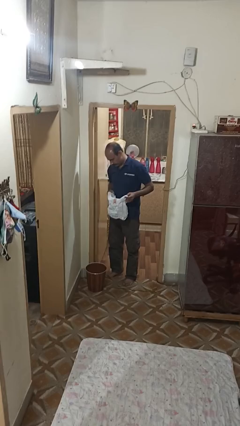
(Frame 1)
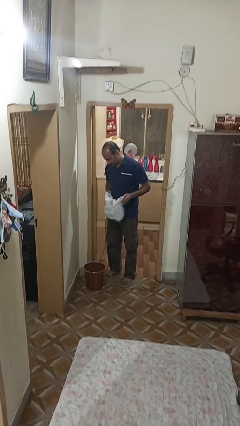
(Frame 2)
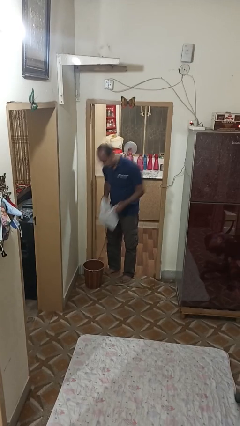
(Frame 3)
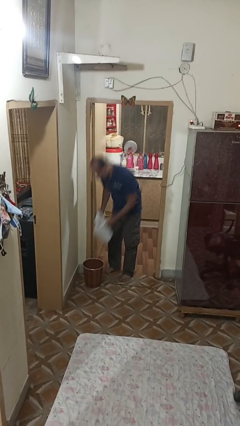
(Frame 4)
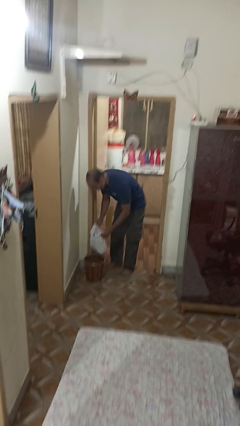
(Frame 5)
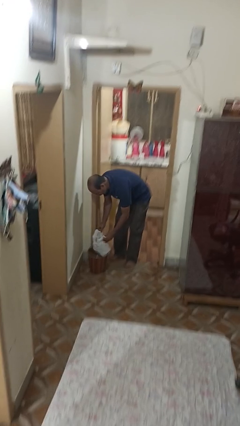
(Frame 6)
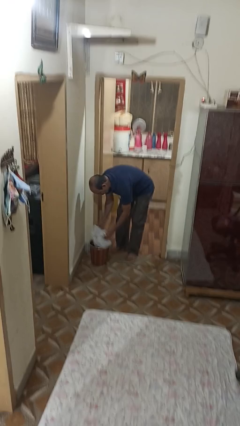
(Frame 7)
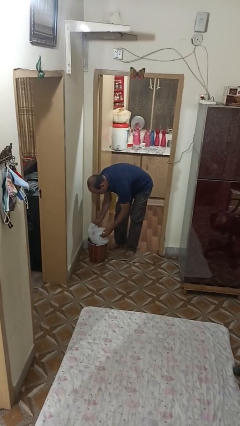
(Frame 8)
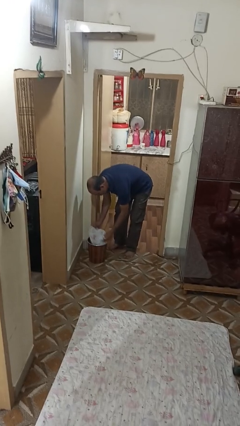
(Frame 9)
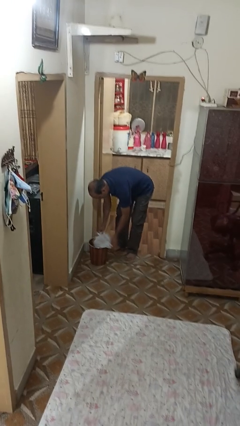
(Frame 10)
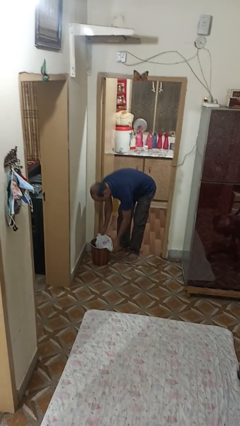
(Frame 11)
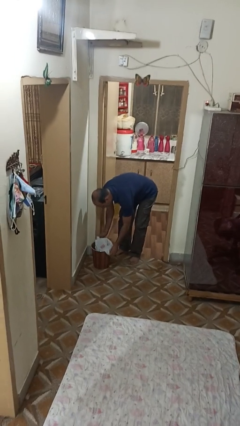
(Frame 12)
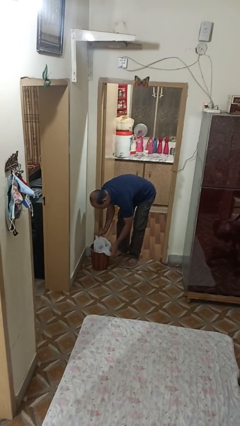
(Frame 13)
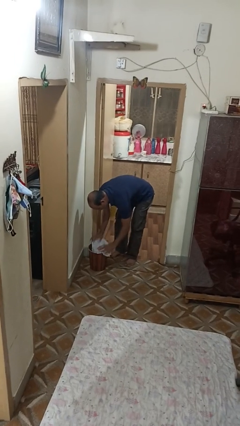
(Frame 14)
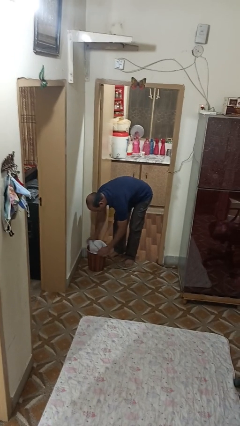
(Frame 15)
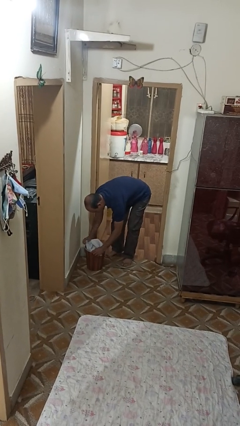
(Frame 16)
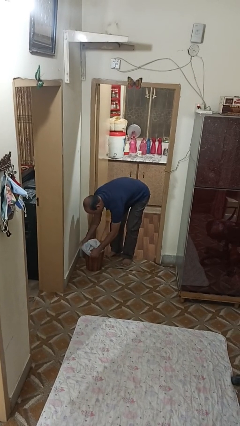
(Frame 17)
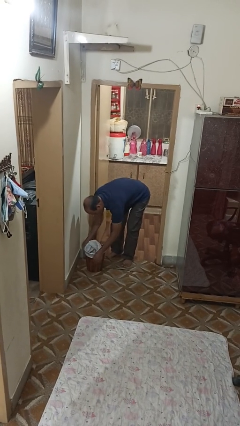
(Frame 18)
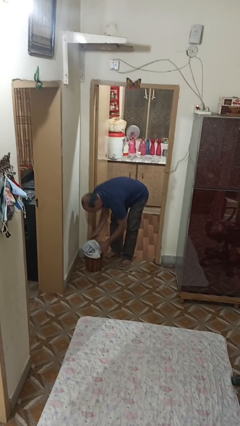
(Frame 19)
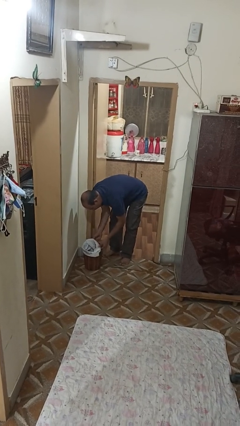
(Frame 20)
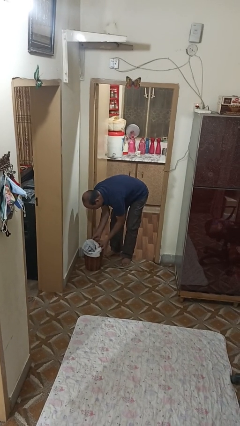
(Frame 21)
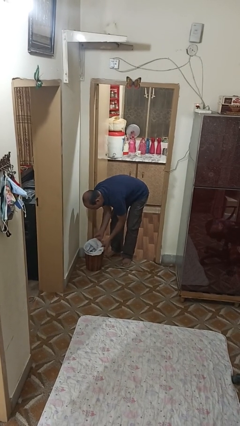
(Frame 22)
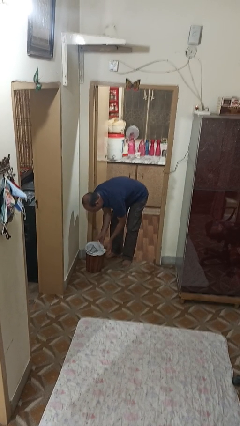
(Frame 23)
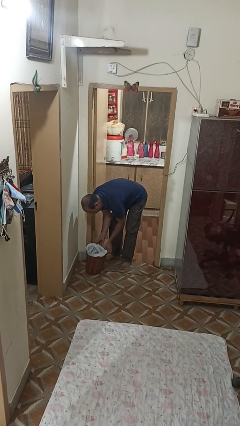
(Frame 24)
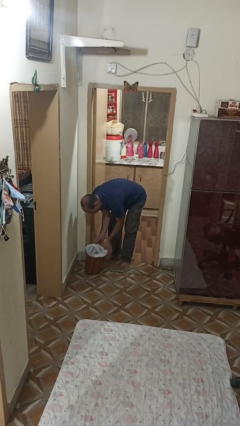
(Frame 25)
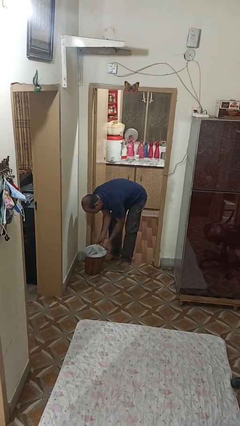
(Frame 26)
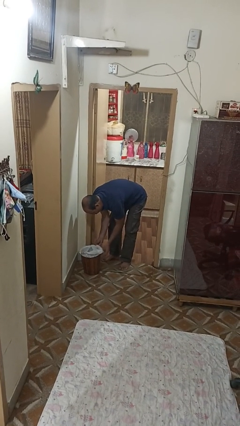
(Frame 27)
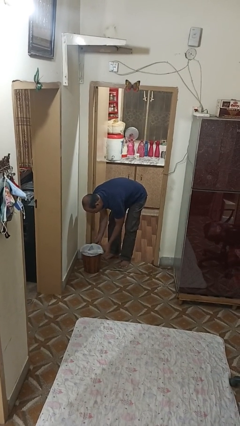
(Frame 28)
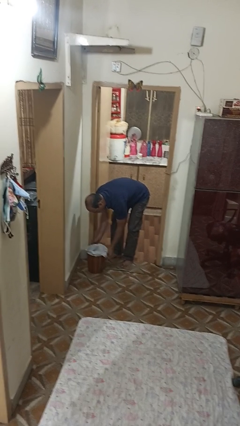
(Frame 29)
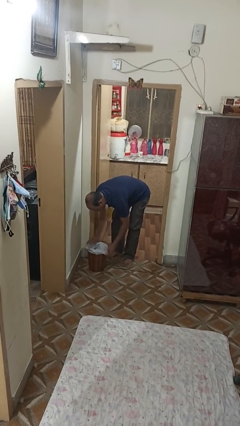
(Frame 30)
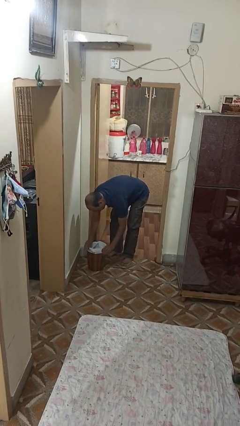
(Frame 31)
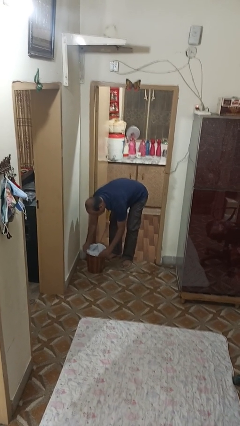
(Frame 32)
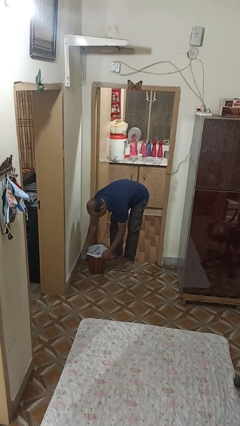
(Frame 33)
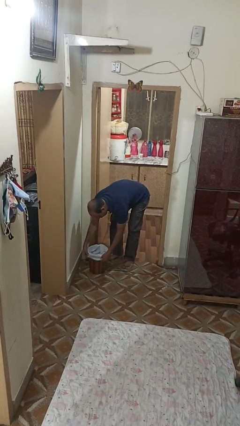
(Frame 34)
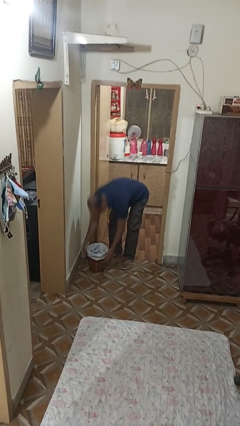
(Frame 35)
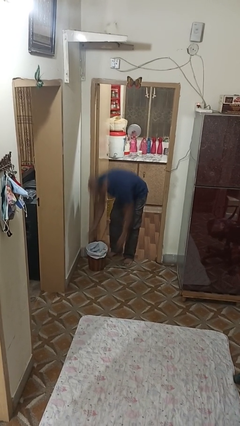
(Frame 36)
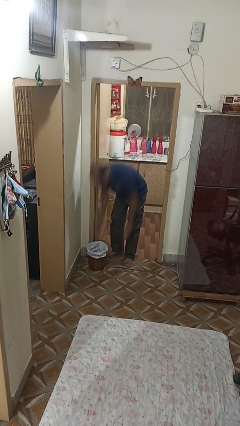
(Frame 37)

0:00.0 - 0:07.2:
person inserts trashbag into trashcan

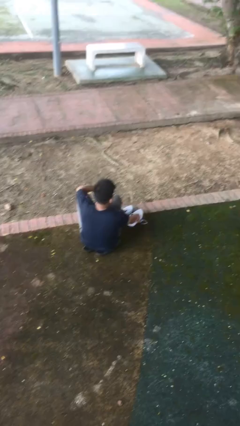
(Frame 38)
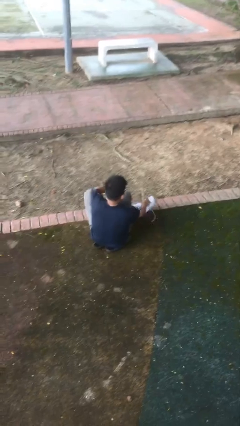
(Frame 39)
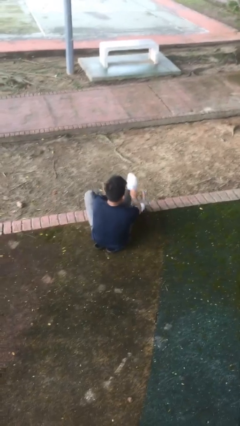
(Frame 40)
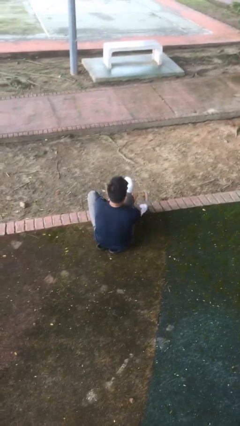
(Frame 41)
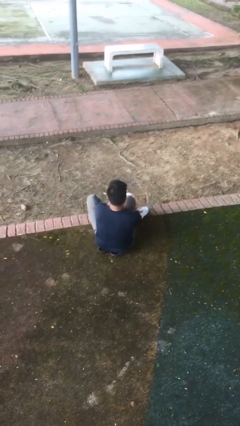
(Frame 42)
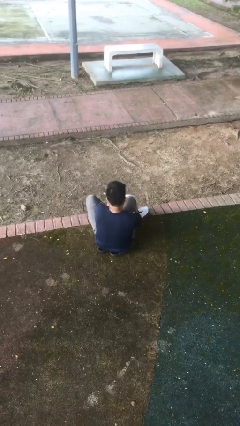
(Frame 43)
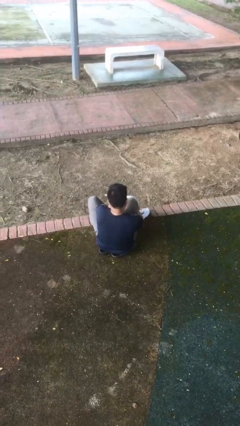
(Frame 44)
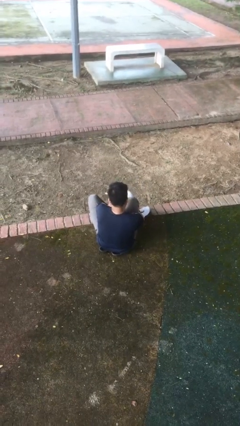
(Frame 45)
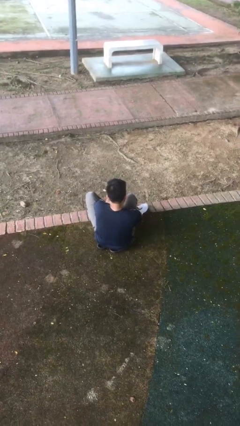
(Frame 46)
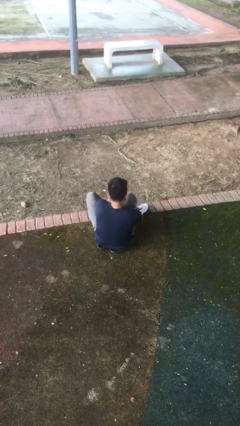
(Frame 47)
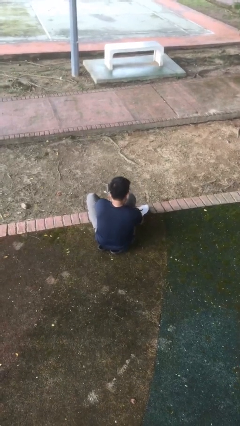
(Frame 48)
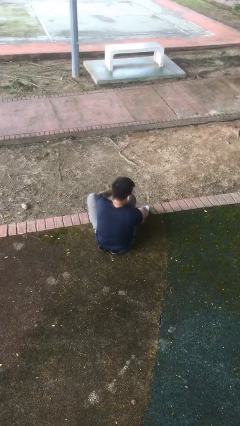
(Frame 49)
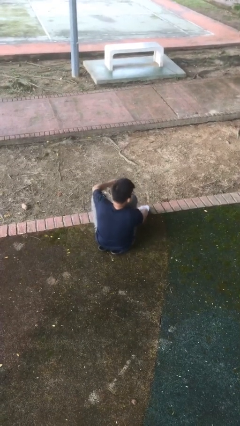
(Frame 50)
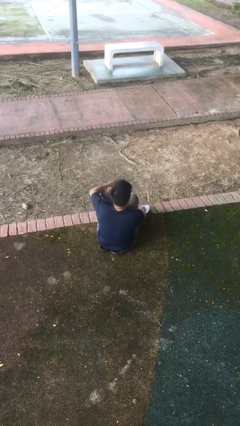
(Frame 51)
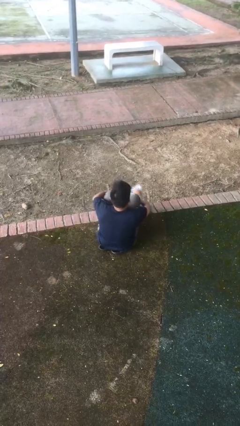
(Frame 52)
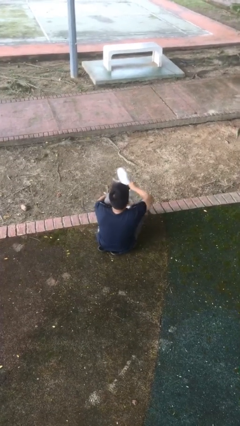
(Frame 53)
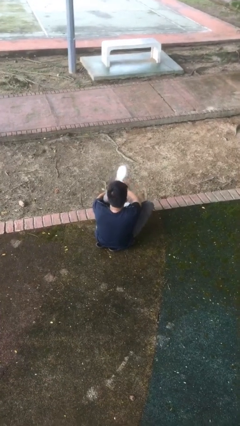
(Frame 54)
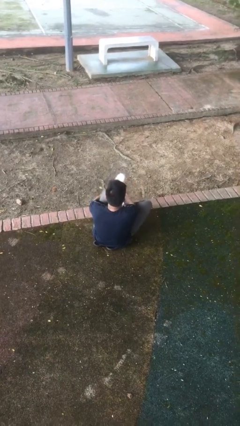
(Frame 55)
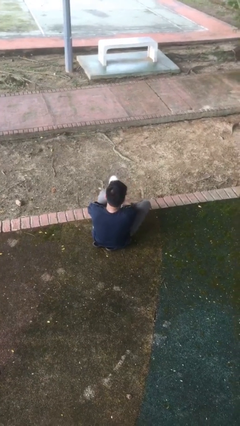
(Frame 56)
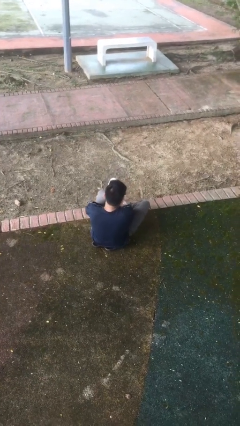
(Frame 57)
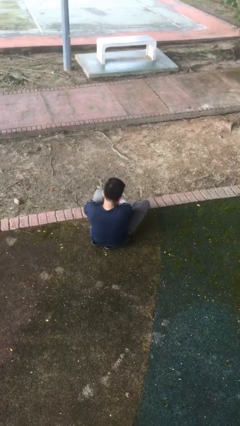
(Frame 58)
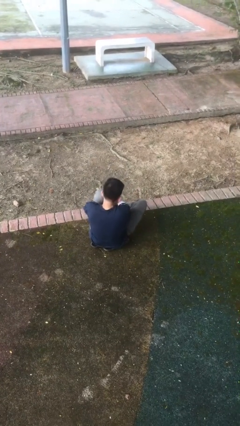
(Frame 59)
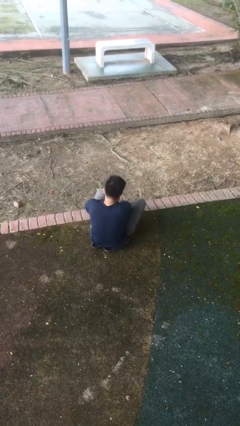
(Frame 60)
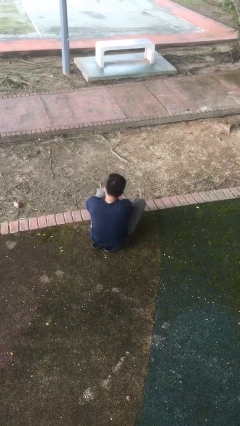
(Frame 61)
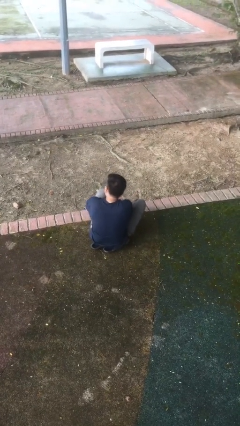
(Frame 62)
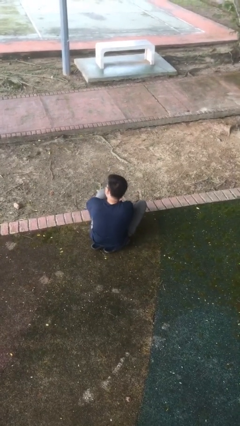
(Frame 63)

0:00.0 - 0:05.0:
person puts on shoes

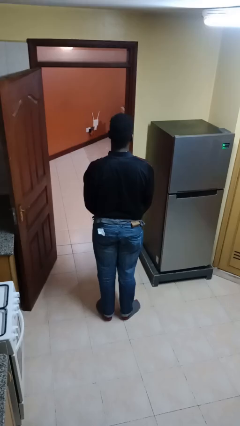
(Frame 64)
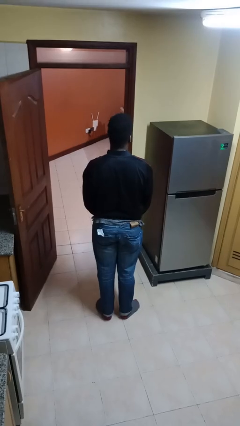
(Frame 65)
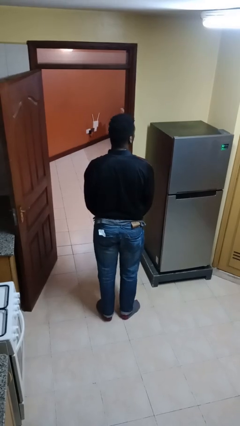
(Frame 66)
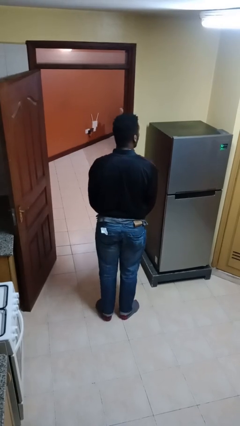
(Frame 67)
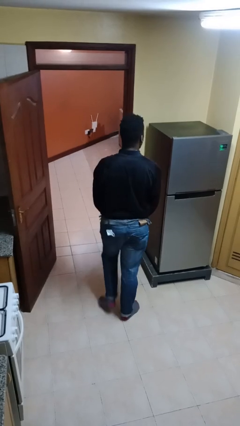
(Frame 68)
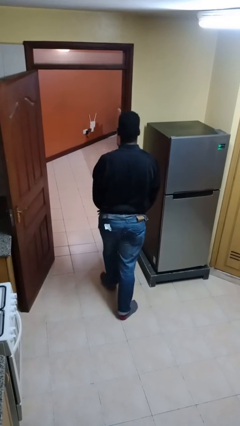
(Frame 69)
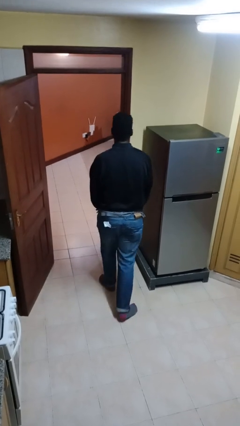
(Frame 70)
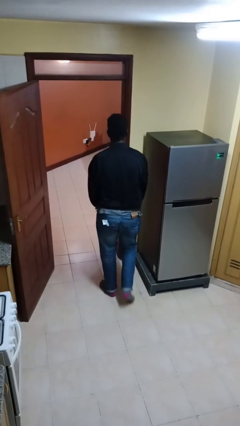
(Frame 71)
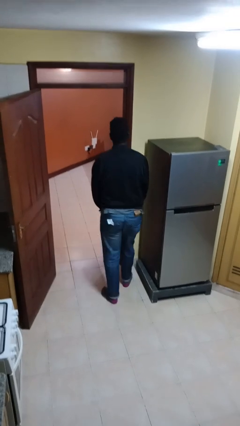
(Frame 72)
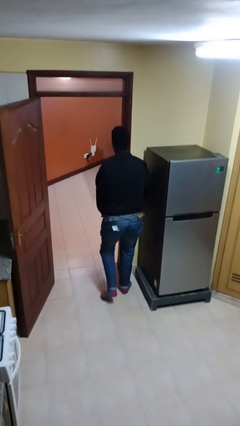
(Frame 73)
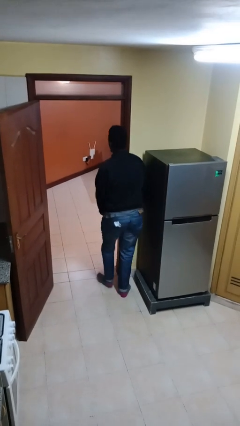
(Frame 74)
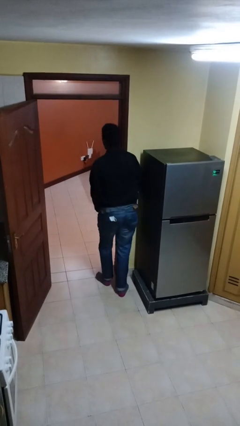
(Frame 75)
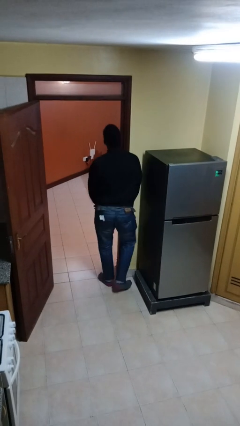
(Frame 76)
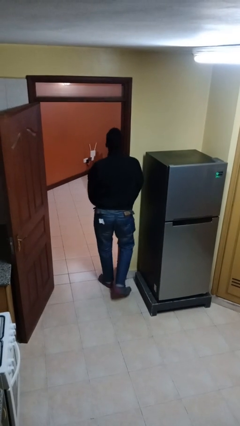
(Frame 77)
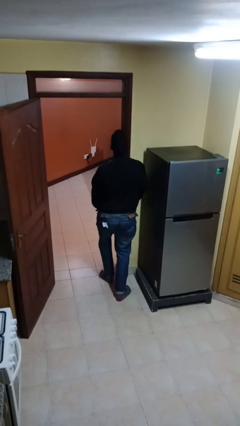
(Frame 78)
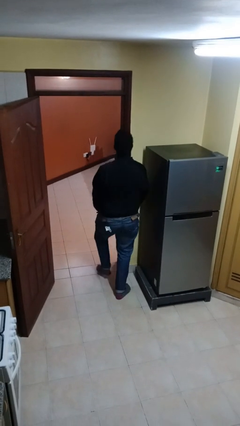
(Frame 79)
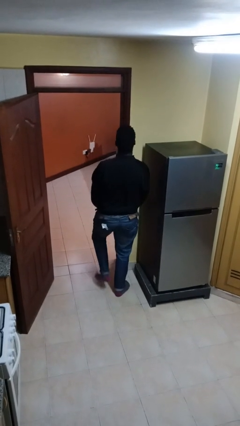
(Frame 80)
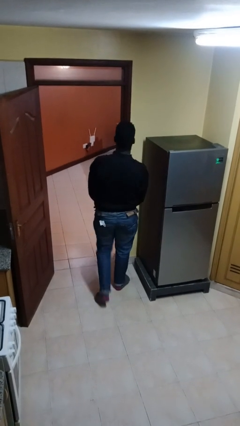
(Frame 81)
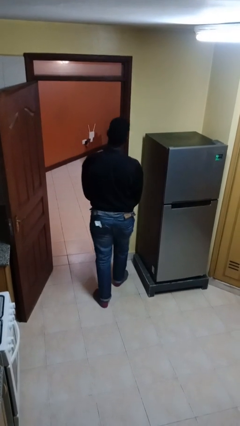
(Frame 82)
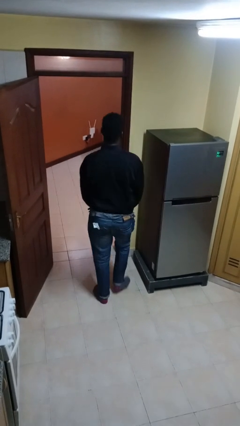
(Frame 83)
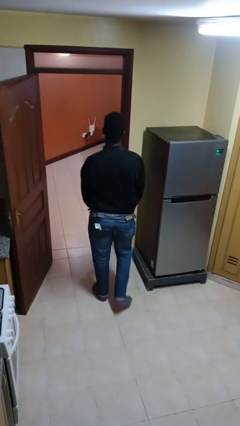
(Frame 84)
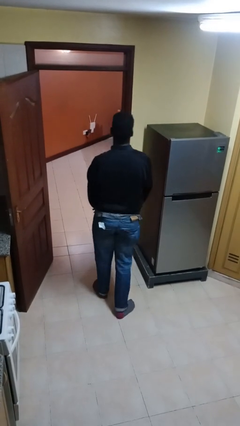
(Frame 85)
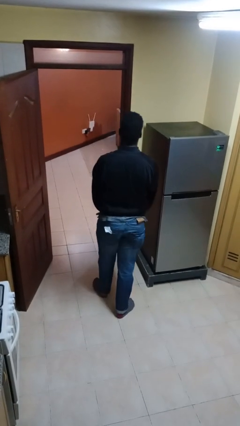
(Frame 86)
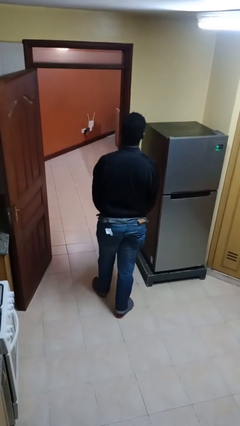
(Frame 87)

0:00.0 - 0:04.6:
person bumps into wall

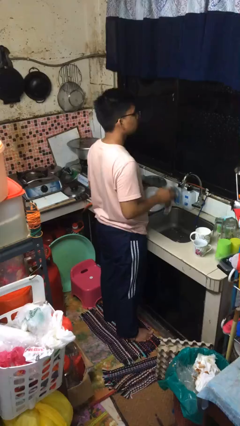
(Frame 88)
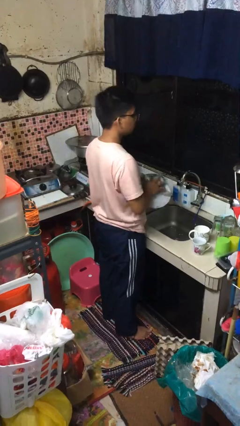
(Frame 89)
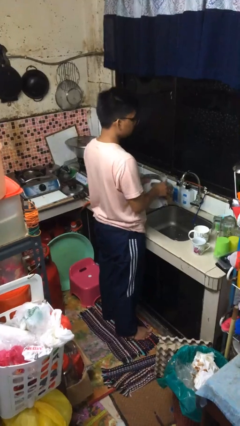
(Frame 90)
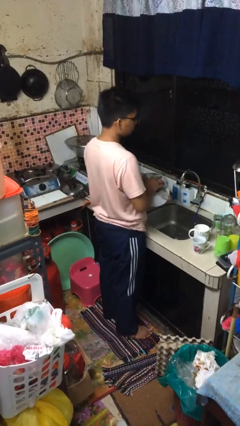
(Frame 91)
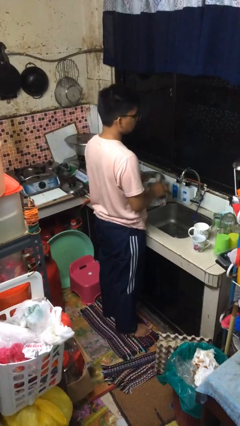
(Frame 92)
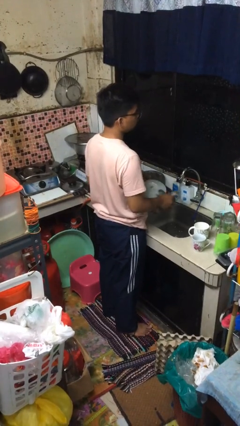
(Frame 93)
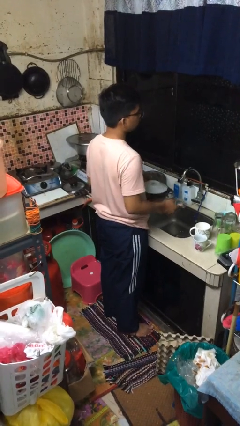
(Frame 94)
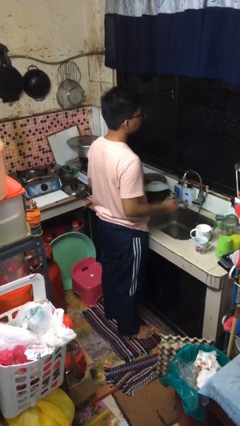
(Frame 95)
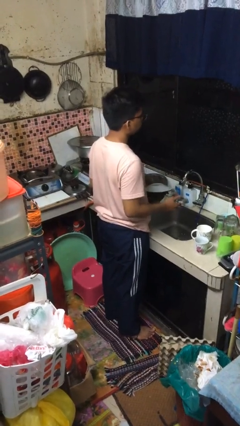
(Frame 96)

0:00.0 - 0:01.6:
person dries dish
